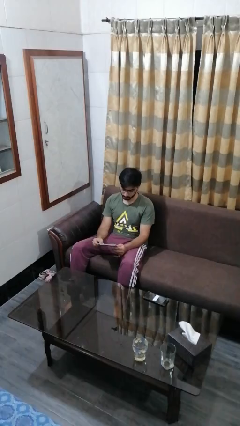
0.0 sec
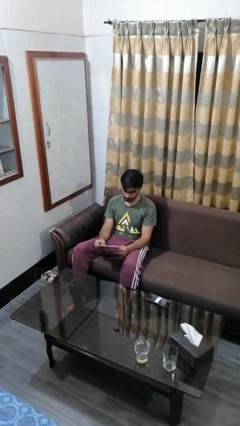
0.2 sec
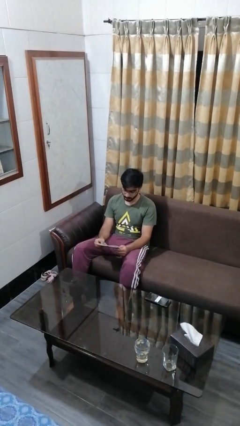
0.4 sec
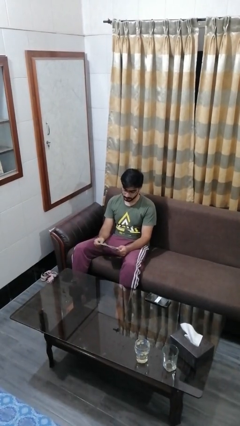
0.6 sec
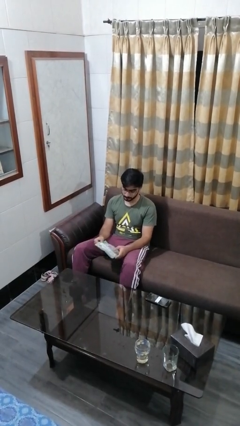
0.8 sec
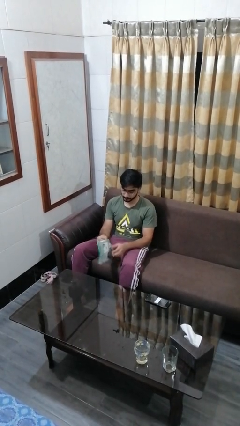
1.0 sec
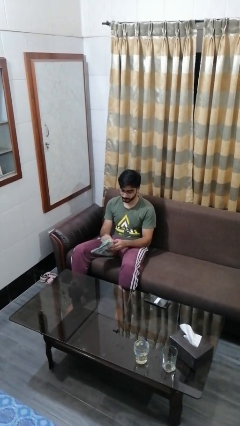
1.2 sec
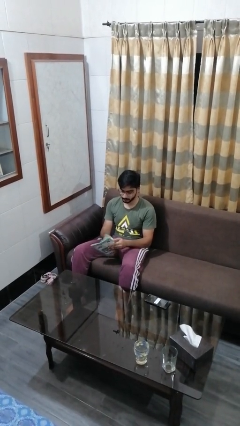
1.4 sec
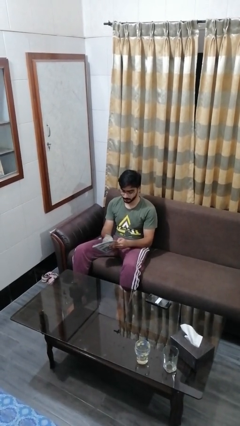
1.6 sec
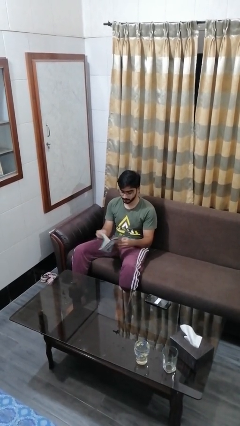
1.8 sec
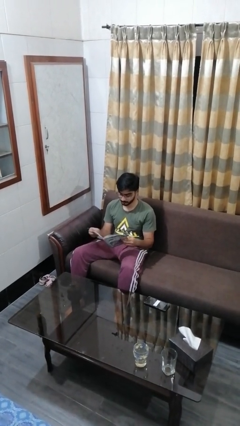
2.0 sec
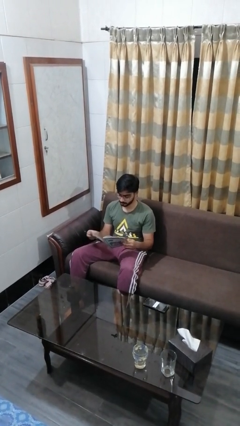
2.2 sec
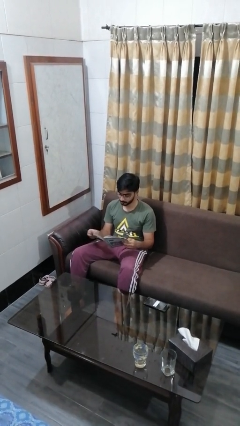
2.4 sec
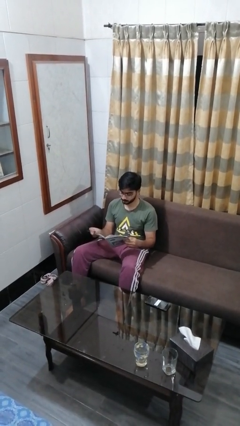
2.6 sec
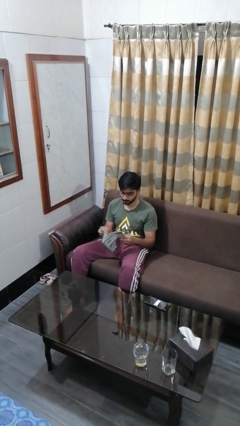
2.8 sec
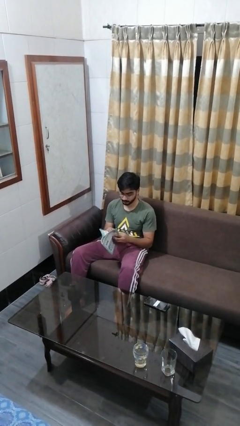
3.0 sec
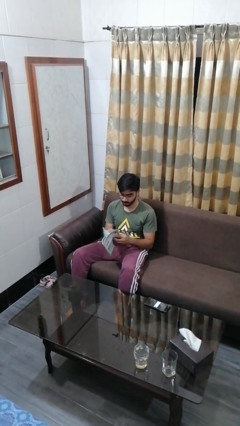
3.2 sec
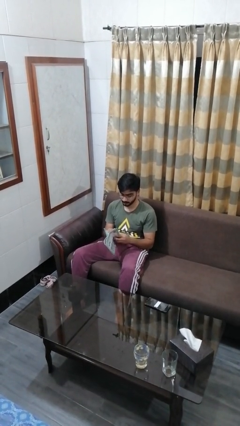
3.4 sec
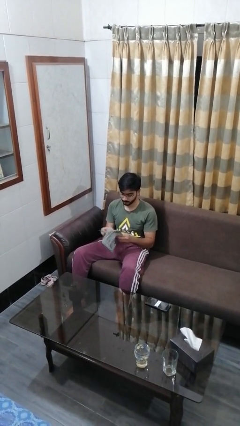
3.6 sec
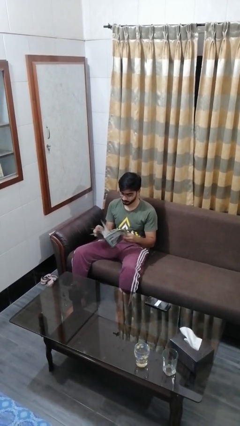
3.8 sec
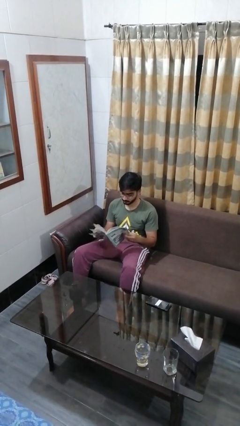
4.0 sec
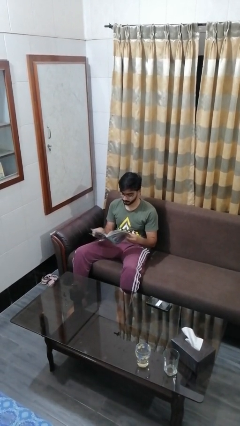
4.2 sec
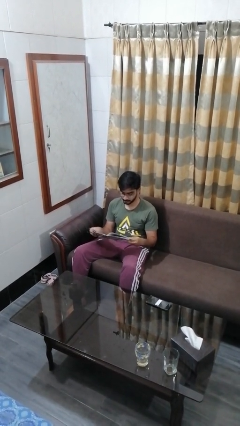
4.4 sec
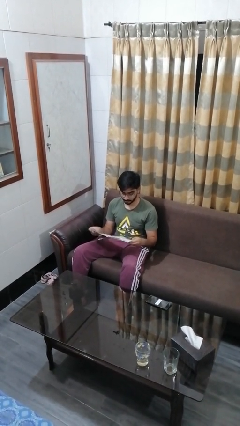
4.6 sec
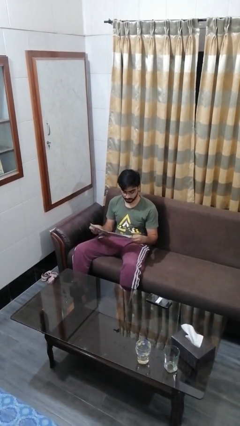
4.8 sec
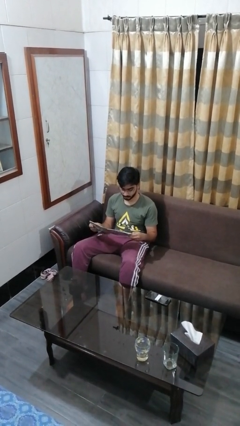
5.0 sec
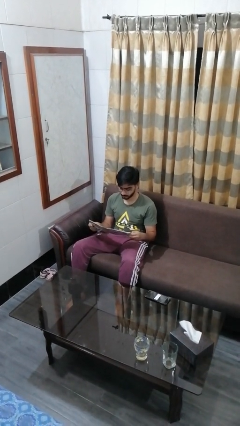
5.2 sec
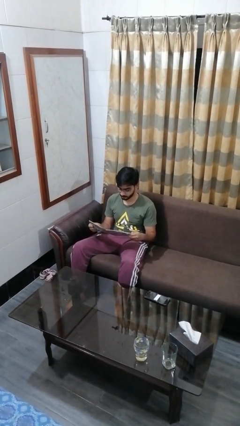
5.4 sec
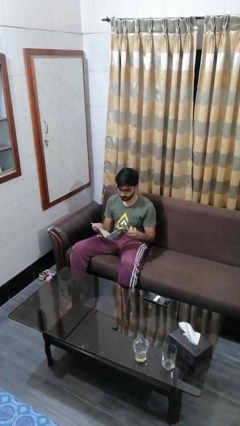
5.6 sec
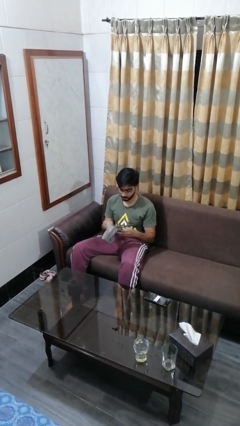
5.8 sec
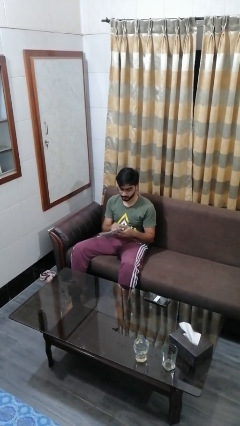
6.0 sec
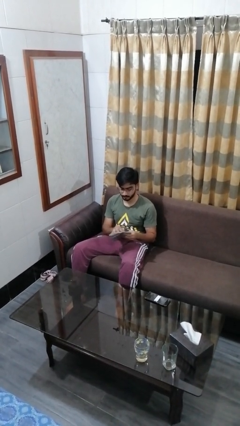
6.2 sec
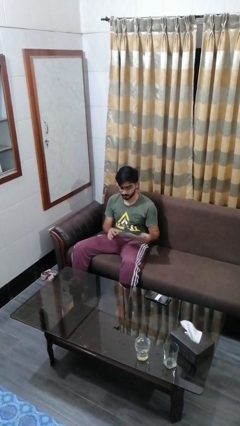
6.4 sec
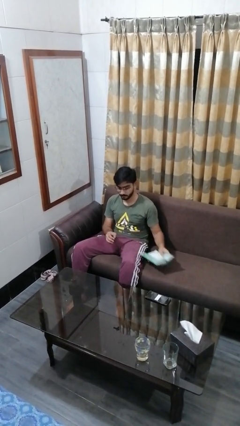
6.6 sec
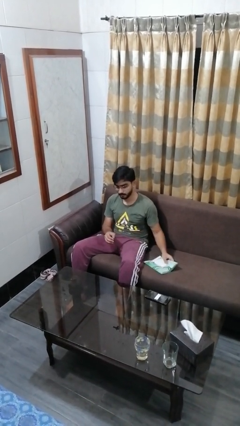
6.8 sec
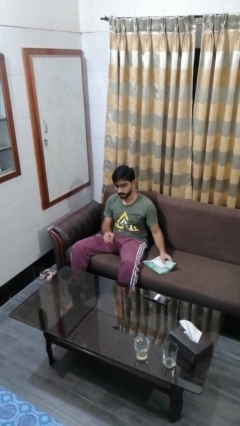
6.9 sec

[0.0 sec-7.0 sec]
person reads magazine

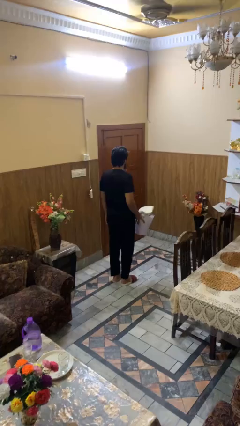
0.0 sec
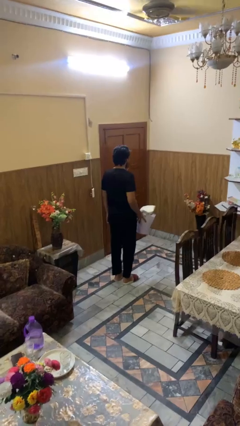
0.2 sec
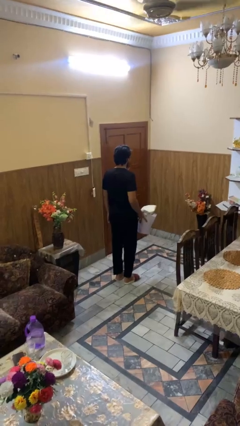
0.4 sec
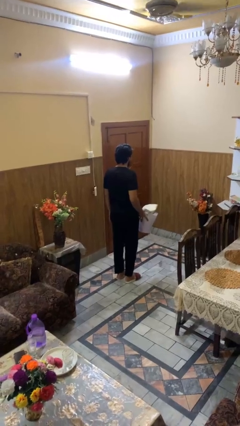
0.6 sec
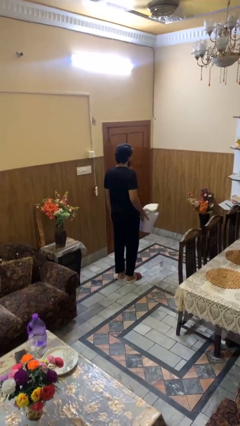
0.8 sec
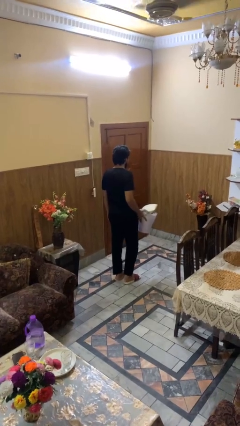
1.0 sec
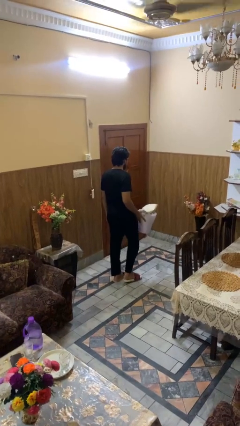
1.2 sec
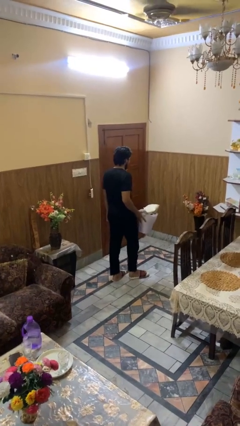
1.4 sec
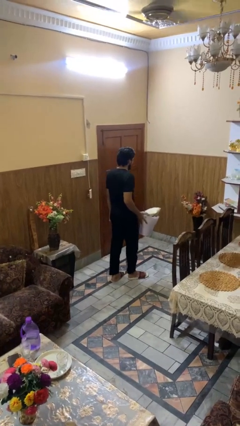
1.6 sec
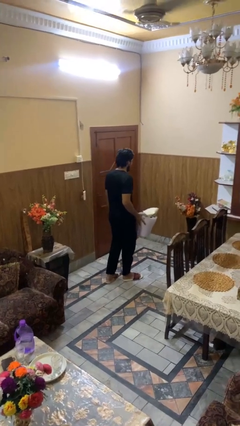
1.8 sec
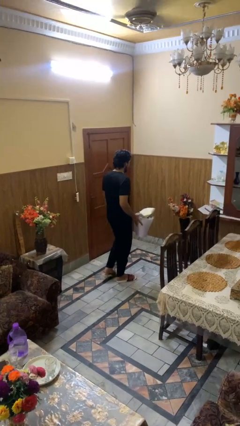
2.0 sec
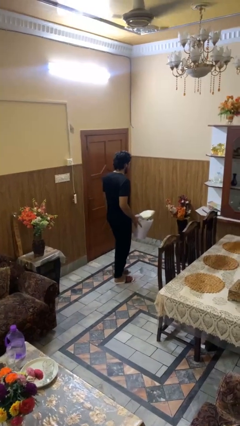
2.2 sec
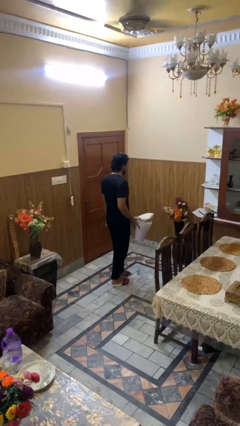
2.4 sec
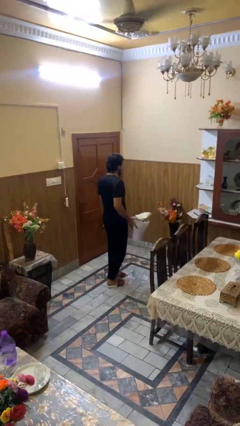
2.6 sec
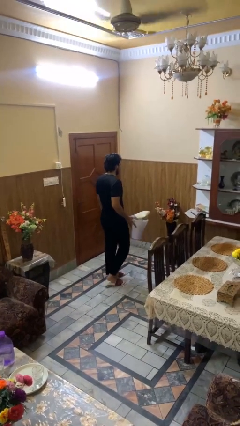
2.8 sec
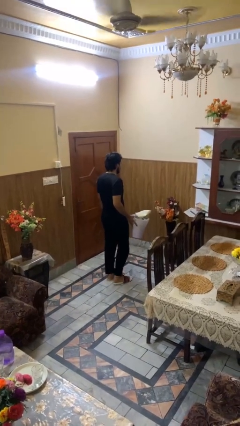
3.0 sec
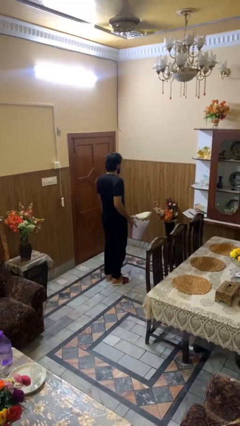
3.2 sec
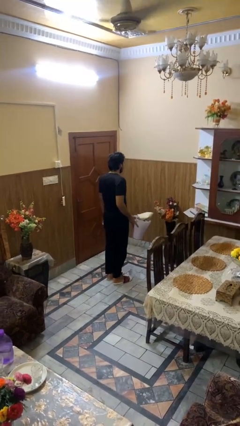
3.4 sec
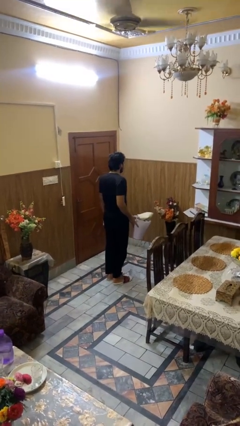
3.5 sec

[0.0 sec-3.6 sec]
person carries laundry basket

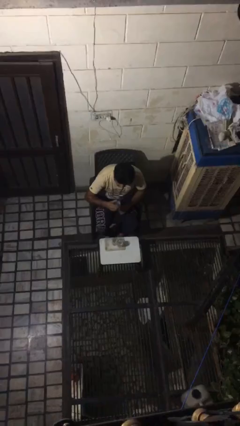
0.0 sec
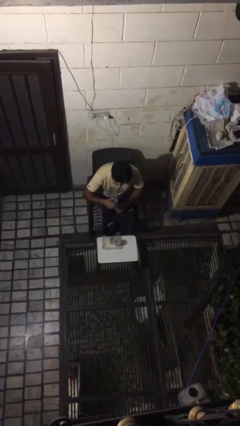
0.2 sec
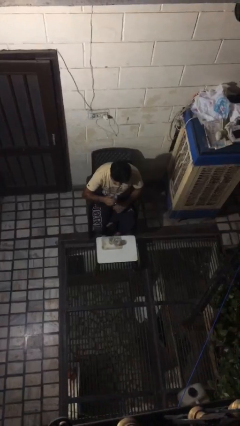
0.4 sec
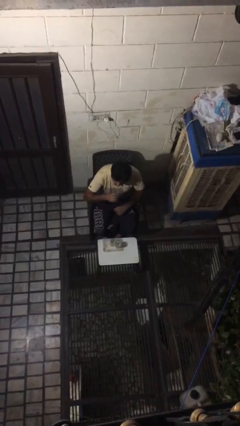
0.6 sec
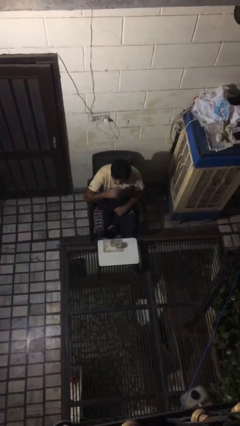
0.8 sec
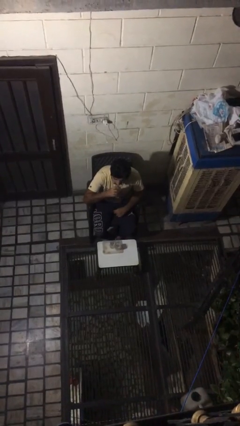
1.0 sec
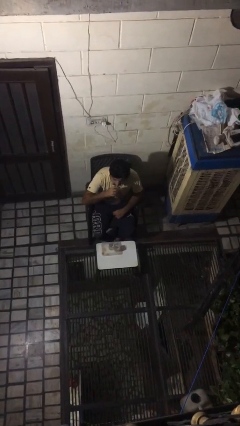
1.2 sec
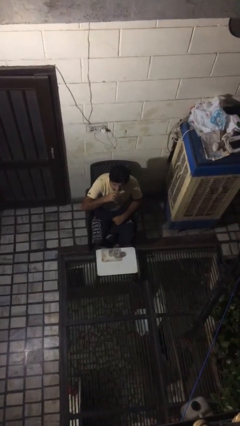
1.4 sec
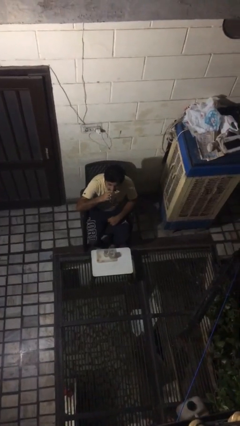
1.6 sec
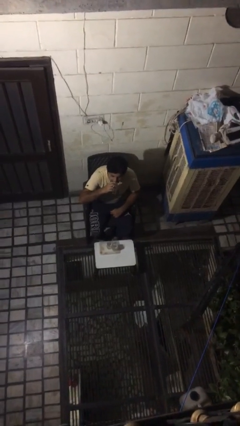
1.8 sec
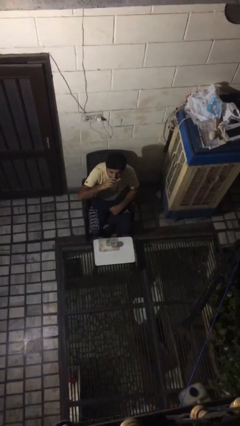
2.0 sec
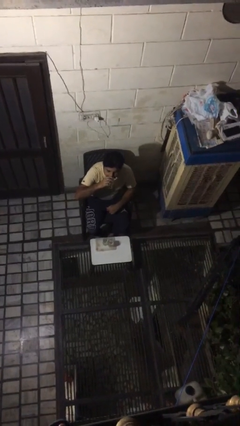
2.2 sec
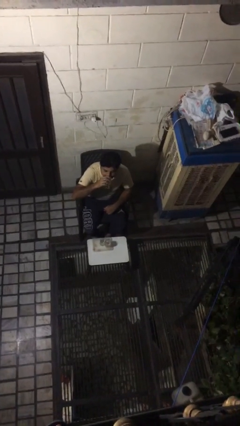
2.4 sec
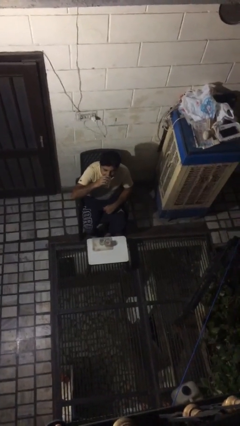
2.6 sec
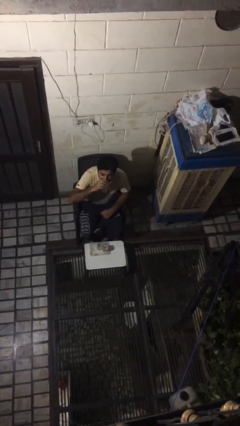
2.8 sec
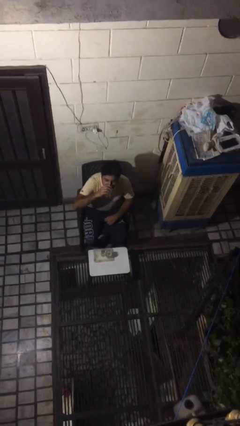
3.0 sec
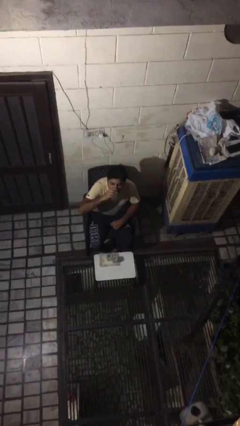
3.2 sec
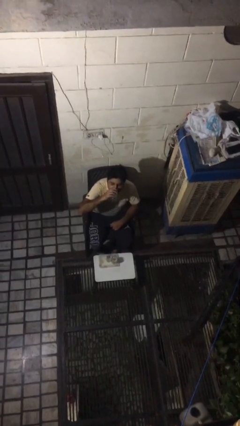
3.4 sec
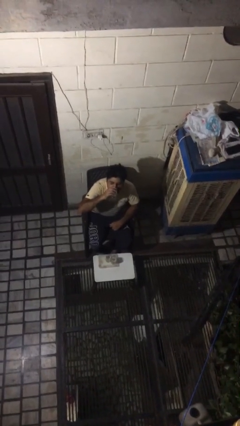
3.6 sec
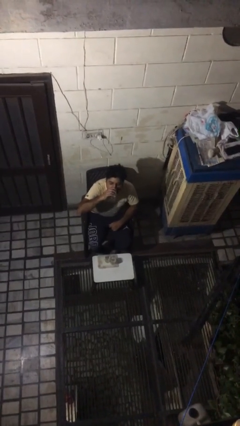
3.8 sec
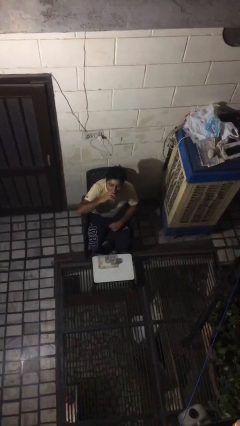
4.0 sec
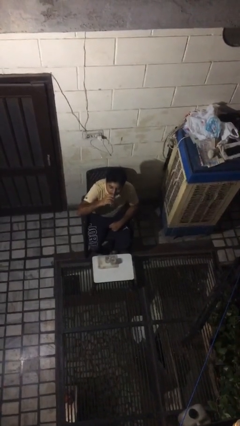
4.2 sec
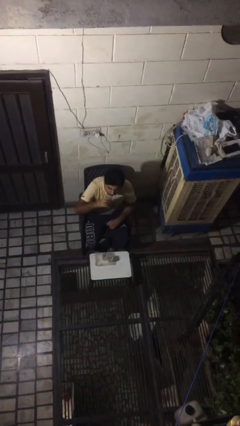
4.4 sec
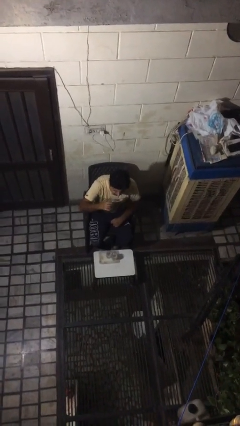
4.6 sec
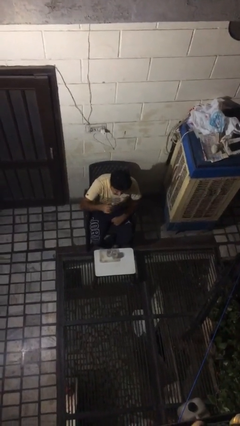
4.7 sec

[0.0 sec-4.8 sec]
person drinks from shotglass

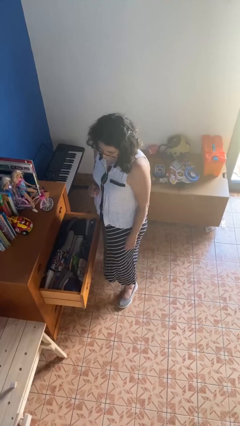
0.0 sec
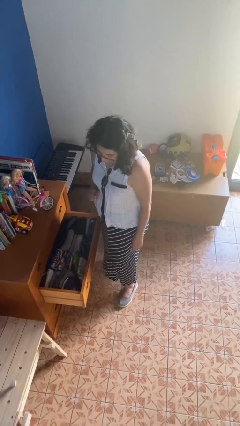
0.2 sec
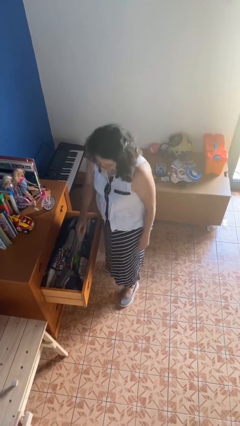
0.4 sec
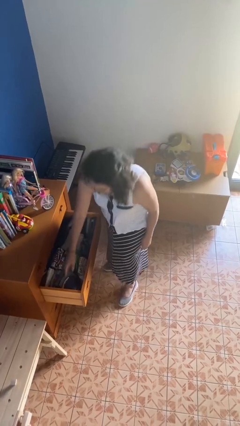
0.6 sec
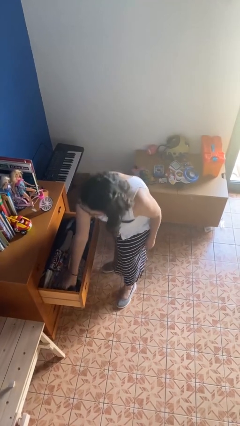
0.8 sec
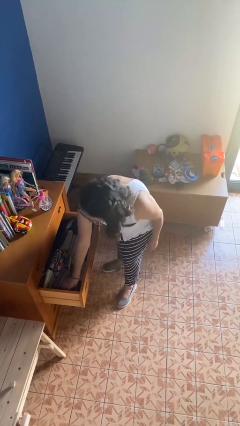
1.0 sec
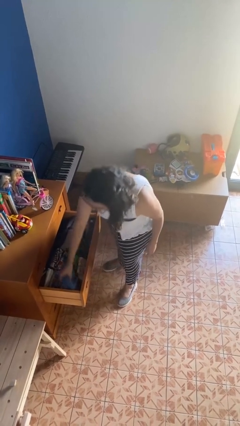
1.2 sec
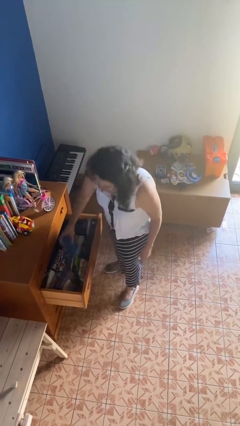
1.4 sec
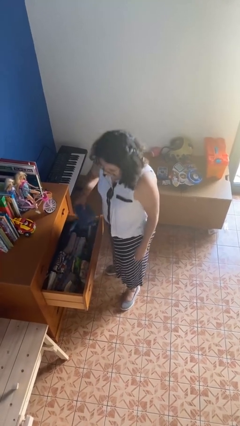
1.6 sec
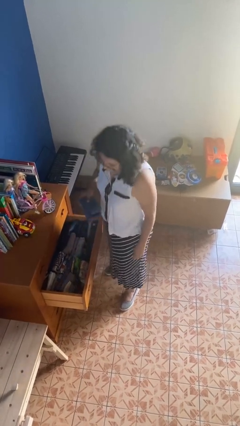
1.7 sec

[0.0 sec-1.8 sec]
person takes clothes from dresser

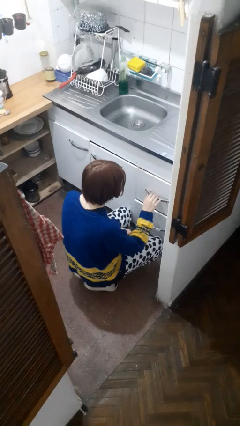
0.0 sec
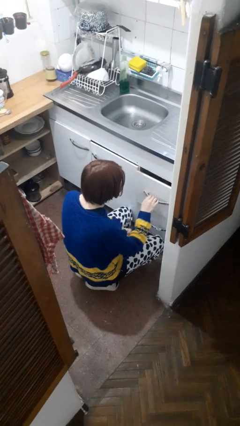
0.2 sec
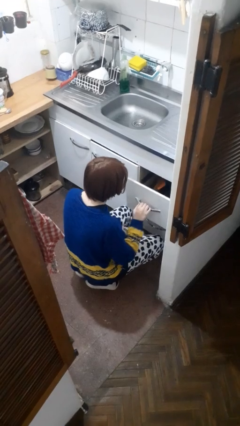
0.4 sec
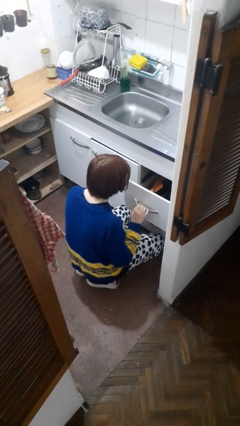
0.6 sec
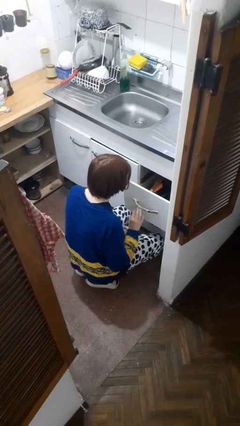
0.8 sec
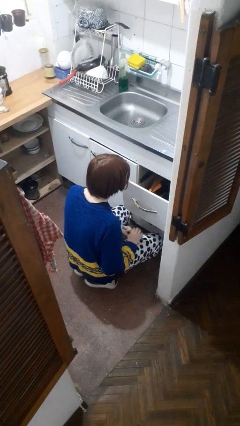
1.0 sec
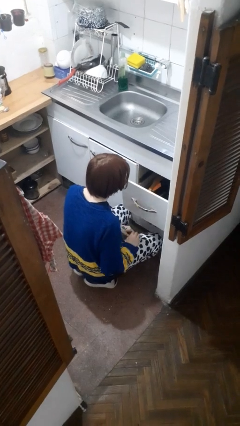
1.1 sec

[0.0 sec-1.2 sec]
person opens kitchen drawer
